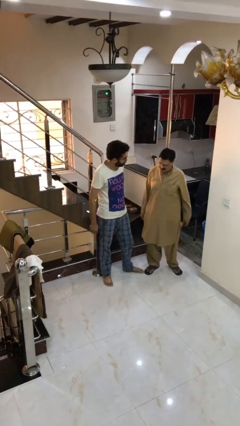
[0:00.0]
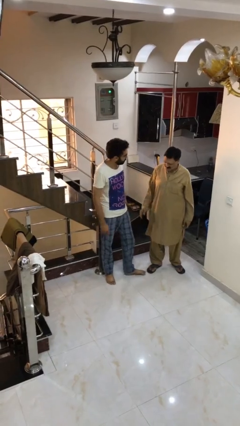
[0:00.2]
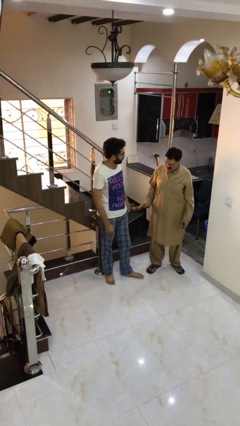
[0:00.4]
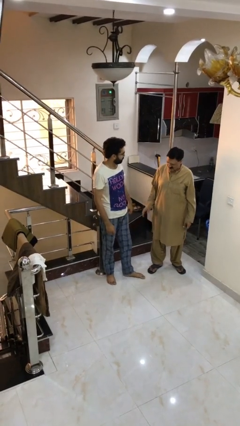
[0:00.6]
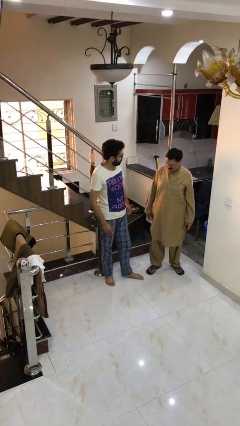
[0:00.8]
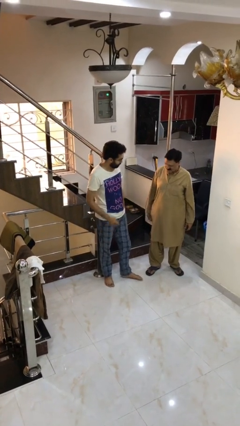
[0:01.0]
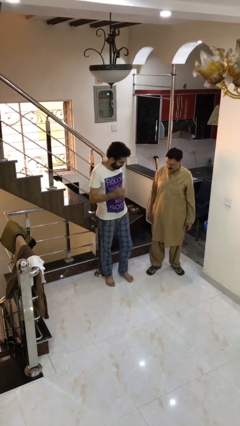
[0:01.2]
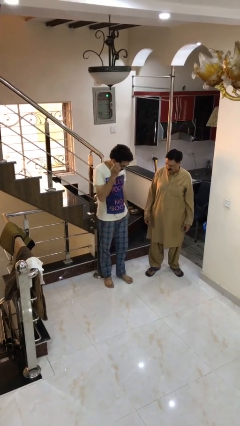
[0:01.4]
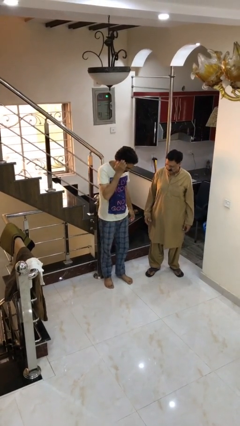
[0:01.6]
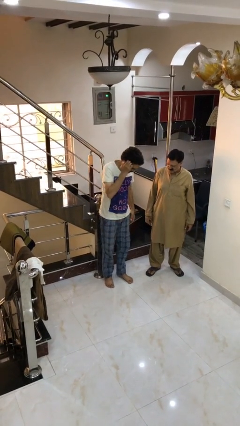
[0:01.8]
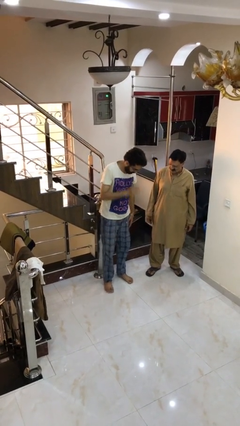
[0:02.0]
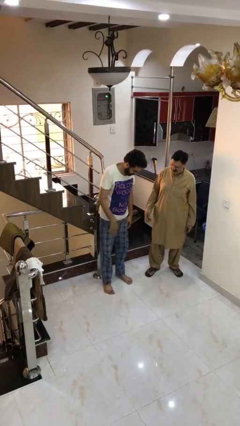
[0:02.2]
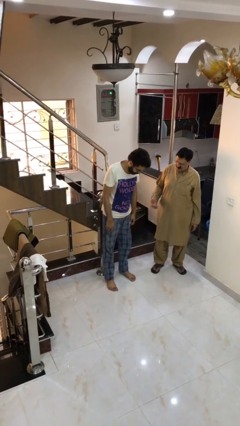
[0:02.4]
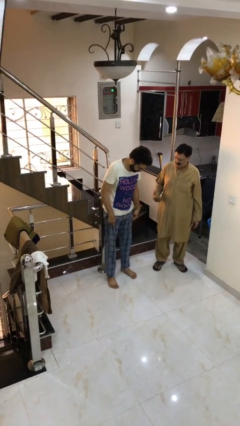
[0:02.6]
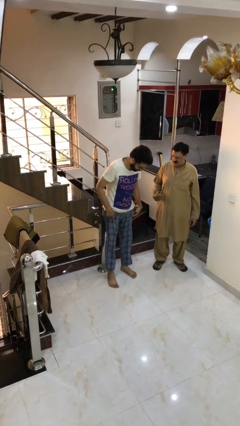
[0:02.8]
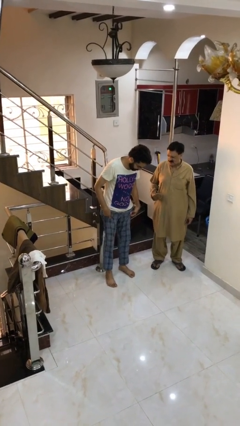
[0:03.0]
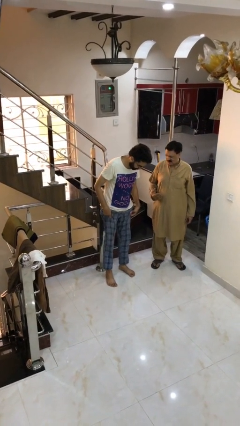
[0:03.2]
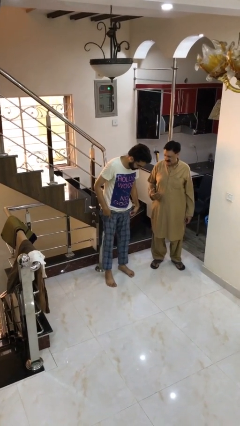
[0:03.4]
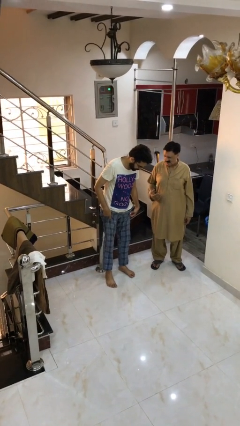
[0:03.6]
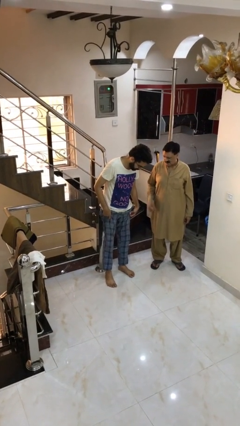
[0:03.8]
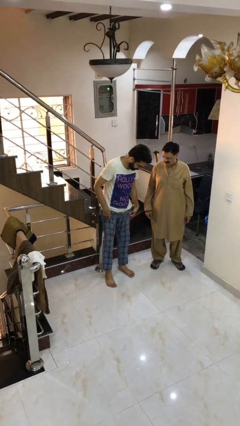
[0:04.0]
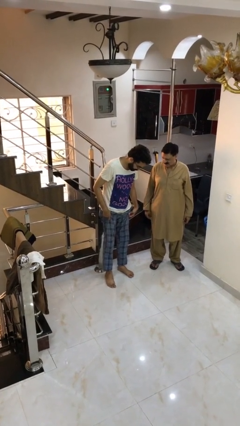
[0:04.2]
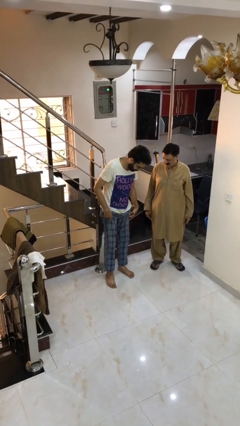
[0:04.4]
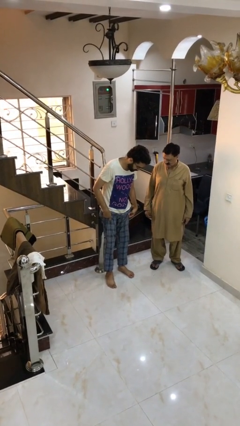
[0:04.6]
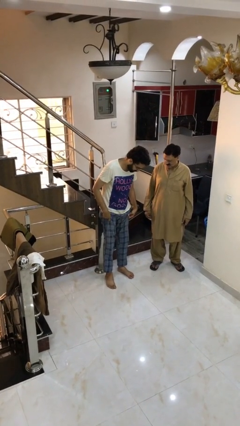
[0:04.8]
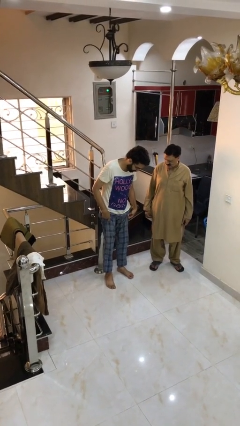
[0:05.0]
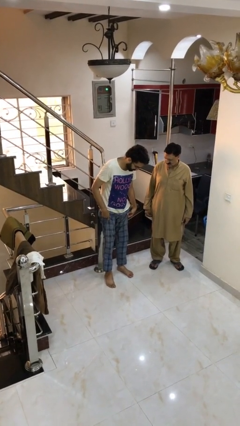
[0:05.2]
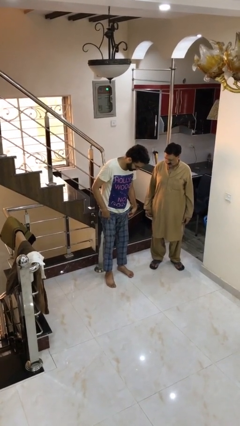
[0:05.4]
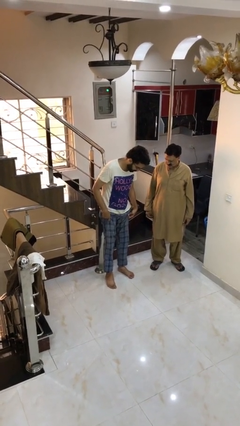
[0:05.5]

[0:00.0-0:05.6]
person talks to person

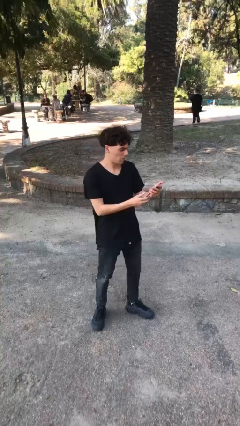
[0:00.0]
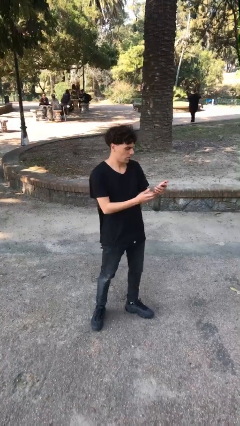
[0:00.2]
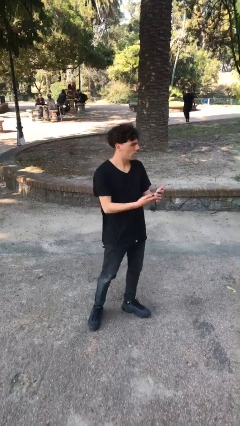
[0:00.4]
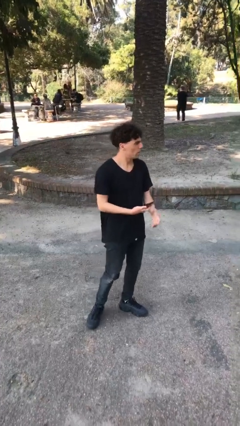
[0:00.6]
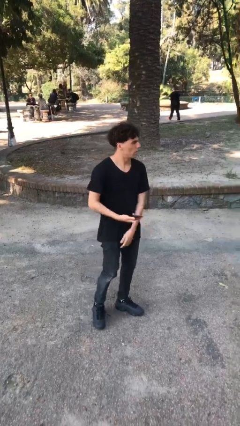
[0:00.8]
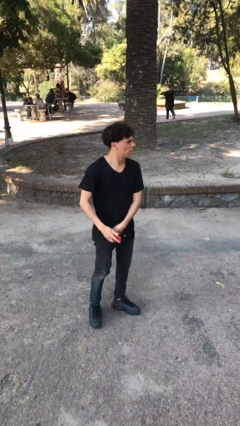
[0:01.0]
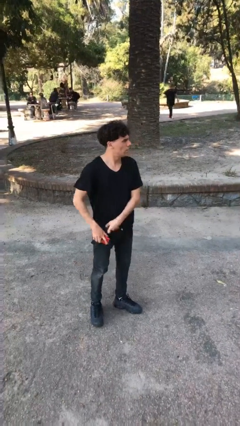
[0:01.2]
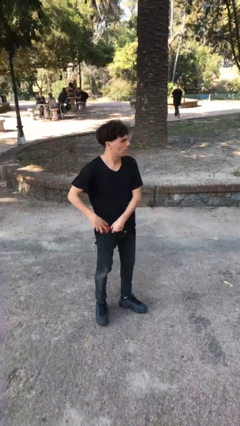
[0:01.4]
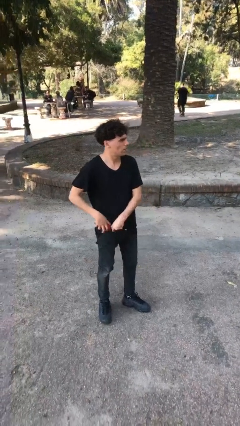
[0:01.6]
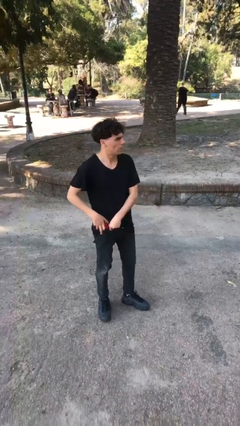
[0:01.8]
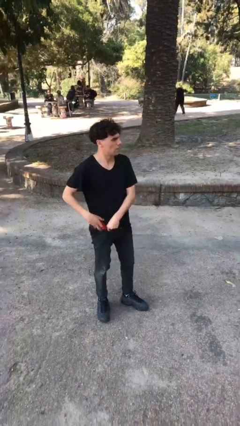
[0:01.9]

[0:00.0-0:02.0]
person puts phone into pocket

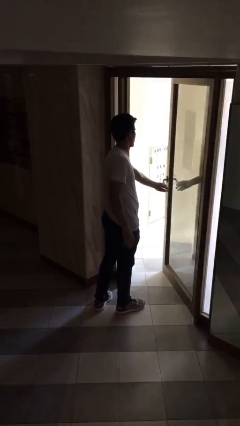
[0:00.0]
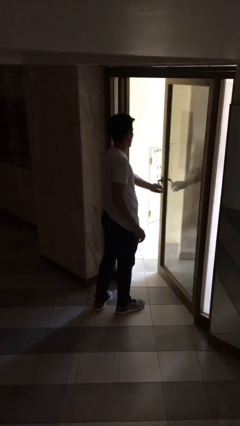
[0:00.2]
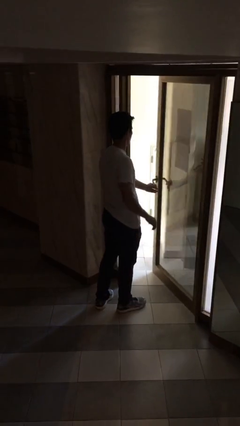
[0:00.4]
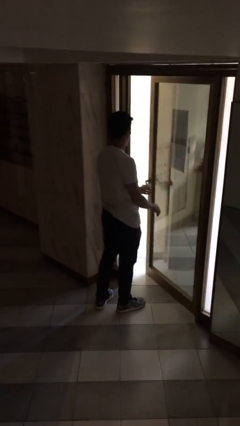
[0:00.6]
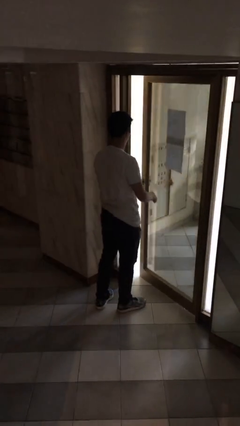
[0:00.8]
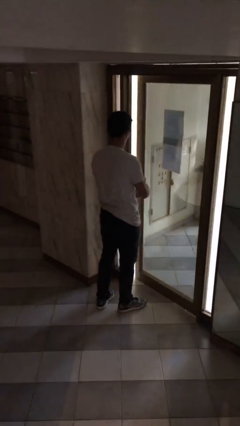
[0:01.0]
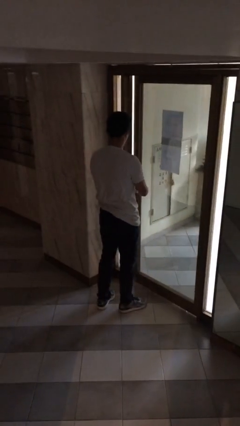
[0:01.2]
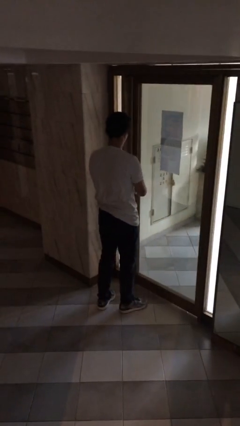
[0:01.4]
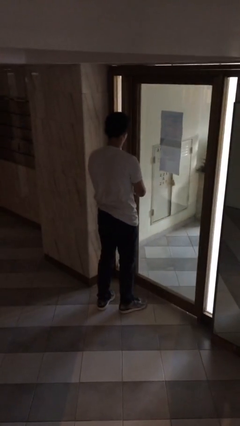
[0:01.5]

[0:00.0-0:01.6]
person closes facility door

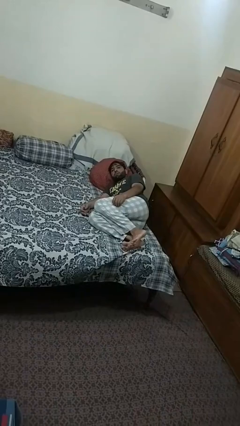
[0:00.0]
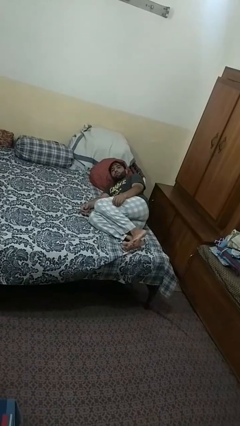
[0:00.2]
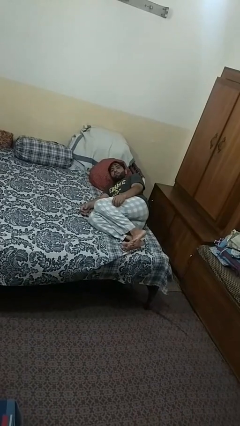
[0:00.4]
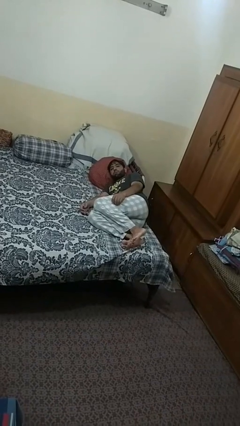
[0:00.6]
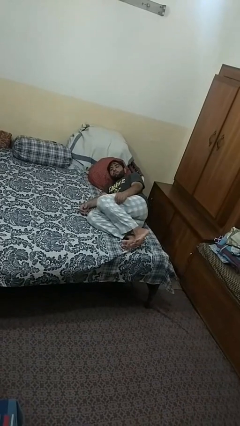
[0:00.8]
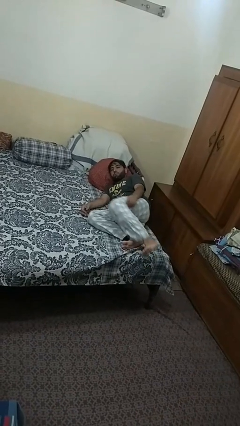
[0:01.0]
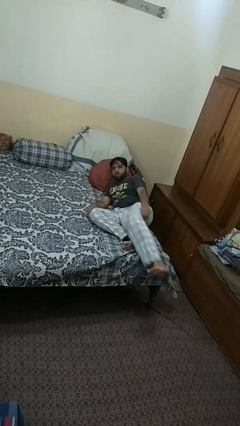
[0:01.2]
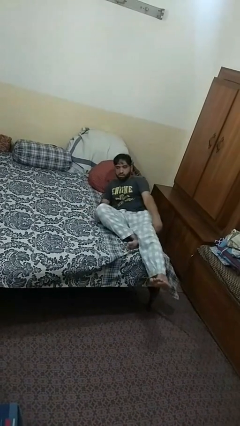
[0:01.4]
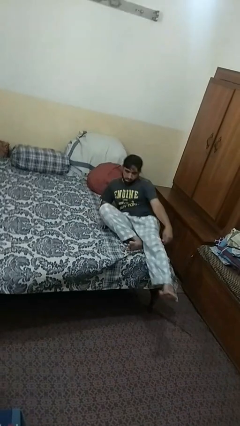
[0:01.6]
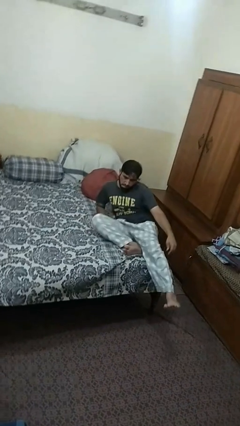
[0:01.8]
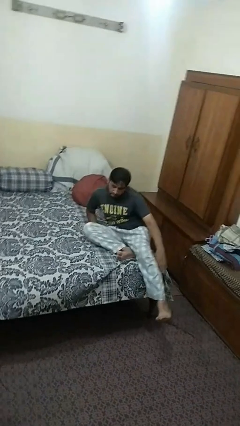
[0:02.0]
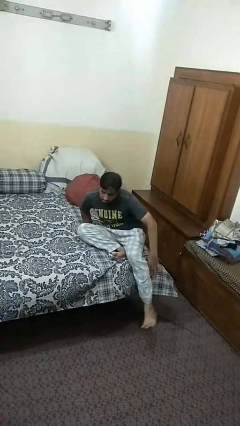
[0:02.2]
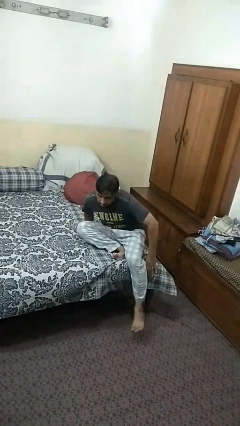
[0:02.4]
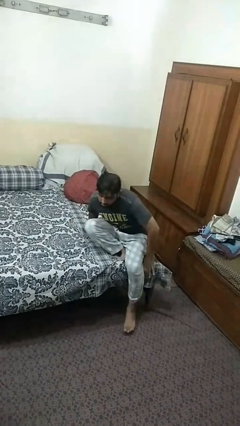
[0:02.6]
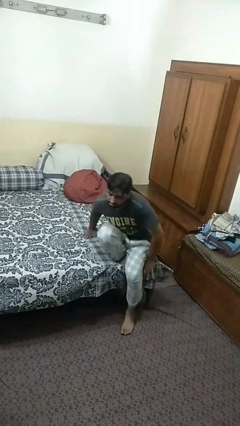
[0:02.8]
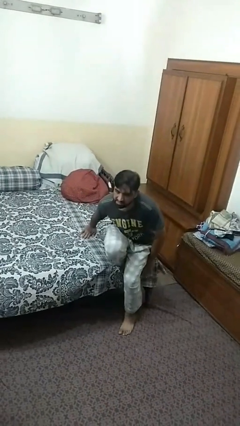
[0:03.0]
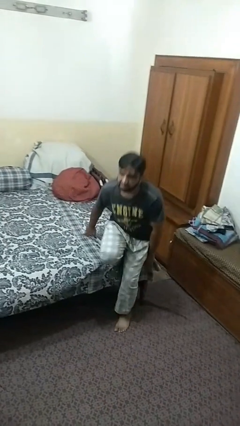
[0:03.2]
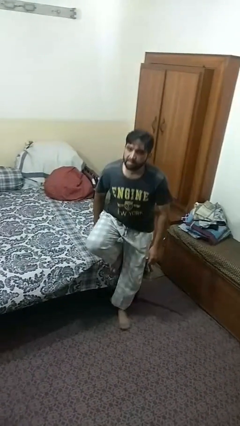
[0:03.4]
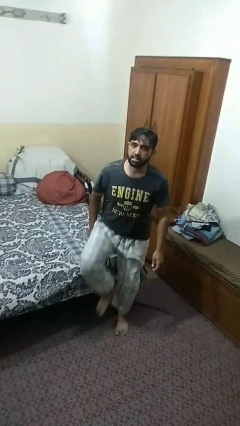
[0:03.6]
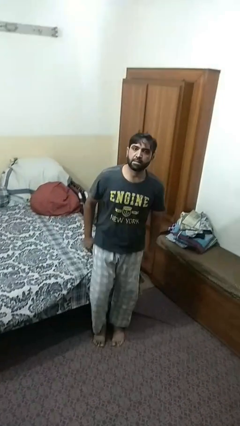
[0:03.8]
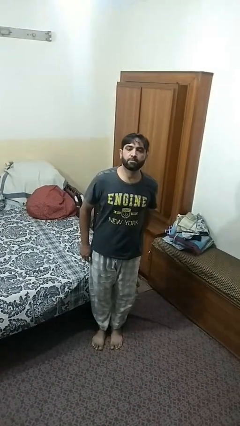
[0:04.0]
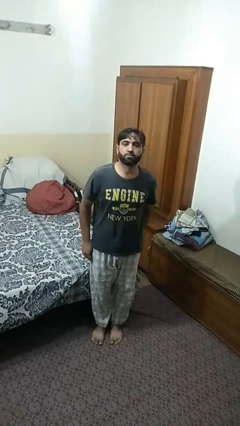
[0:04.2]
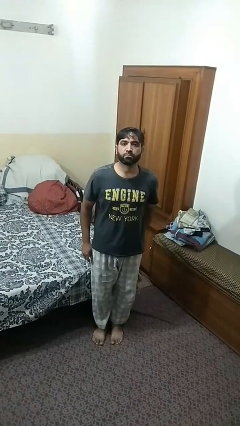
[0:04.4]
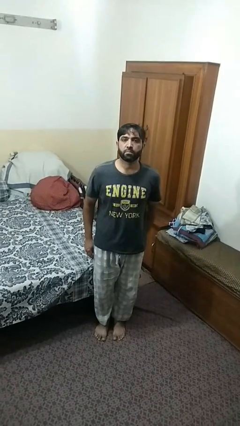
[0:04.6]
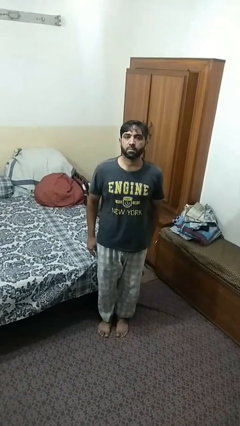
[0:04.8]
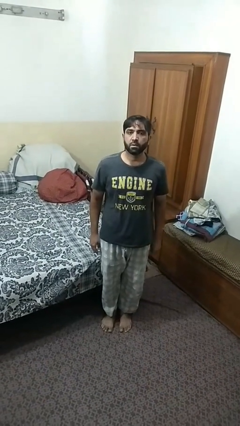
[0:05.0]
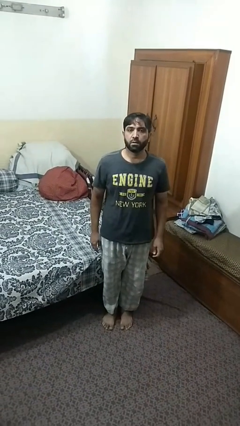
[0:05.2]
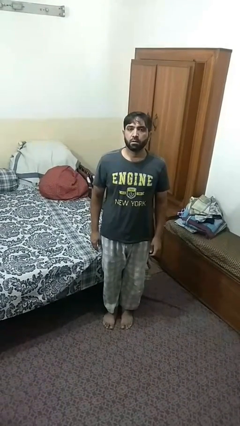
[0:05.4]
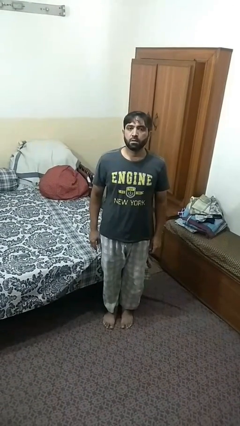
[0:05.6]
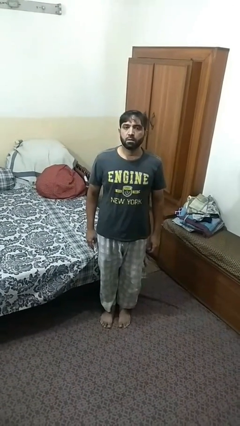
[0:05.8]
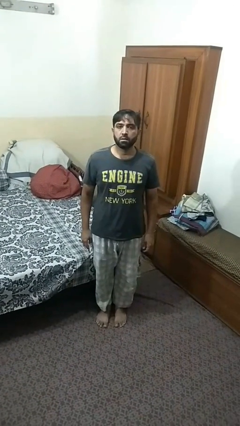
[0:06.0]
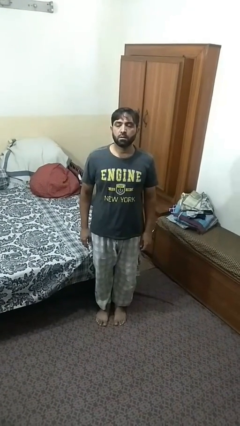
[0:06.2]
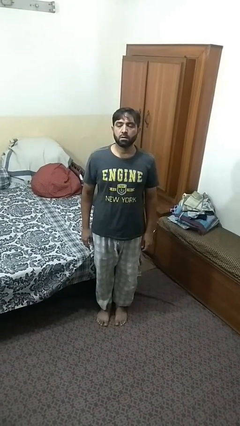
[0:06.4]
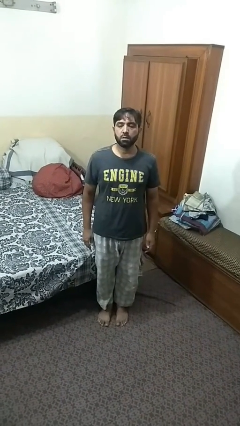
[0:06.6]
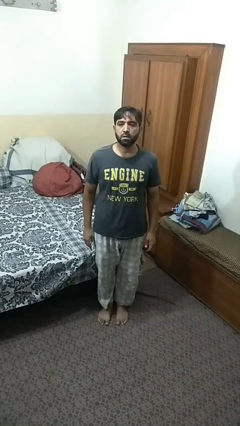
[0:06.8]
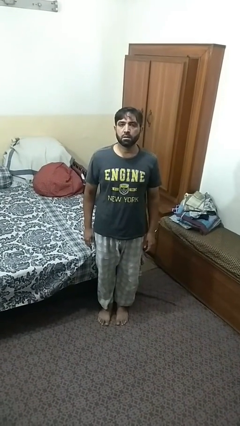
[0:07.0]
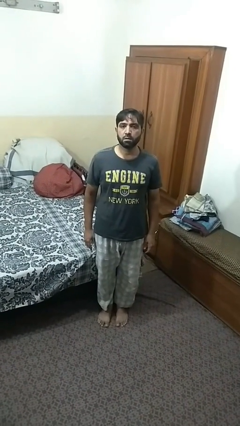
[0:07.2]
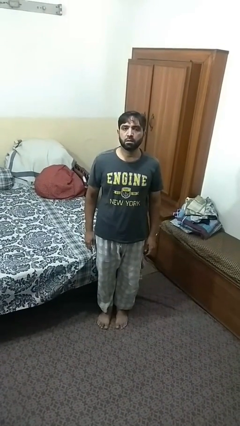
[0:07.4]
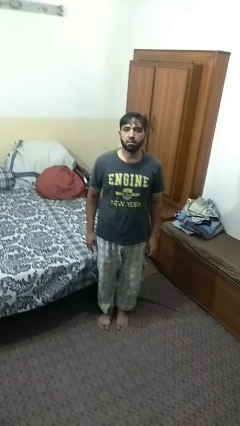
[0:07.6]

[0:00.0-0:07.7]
person stands up

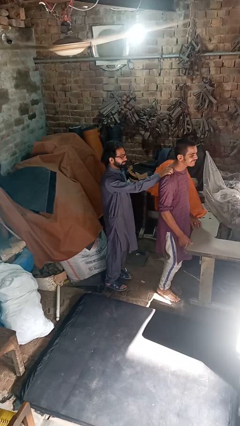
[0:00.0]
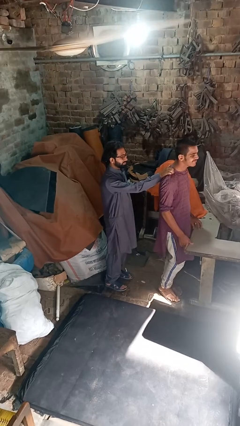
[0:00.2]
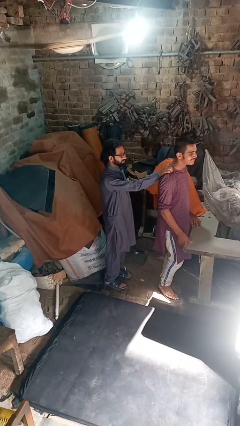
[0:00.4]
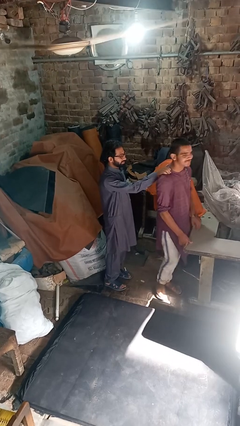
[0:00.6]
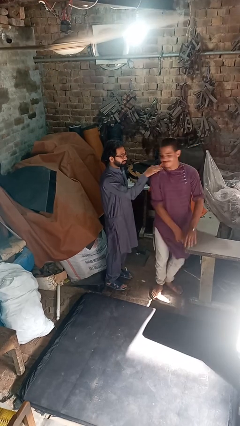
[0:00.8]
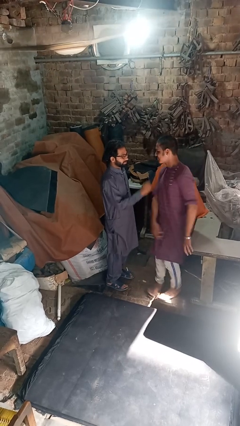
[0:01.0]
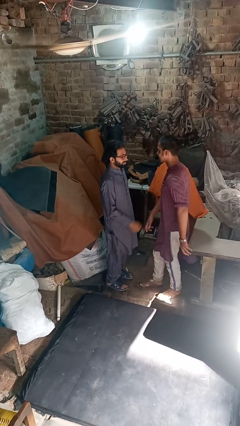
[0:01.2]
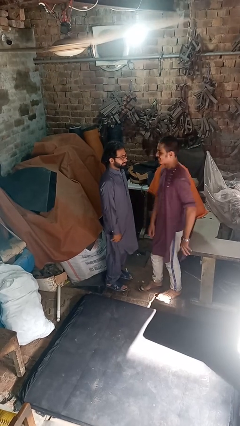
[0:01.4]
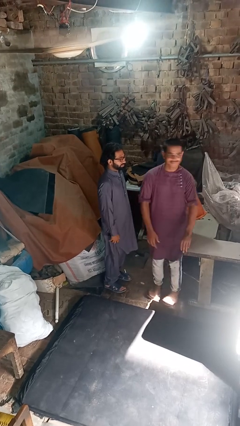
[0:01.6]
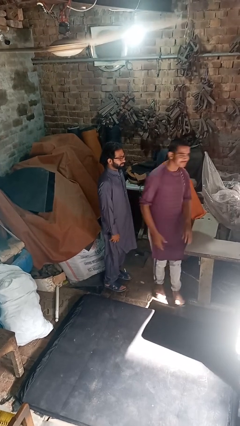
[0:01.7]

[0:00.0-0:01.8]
person spins person around
